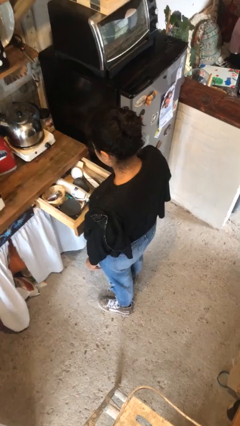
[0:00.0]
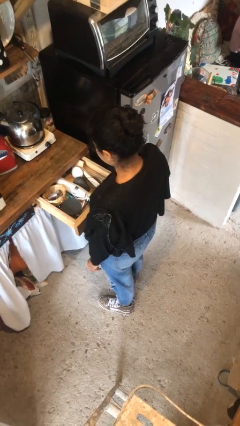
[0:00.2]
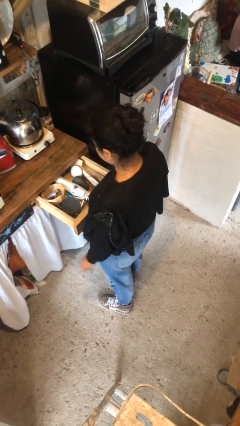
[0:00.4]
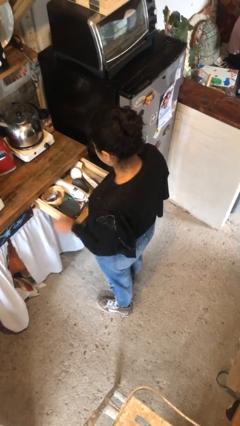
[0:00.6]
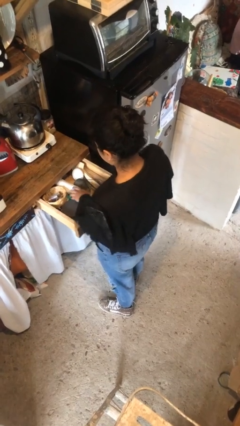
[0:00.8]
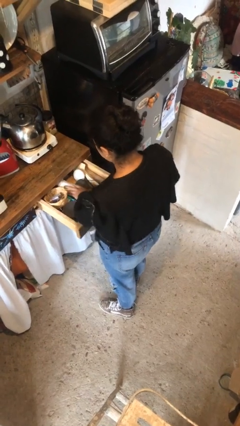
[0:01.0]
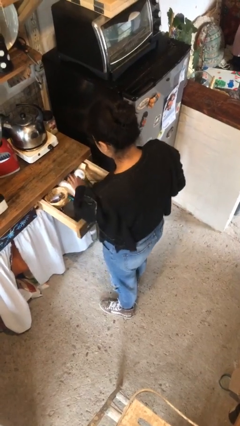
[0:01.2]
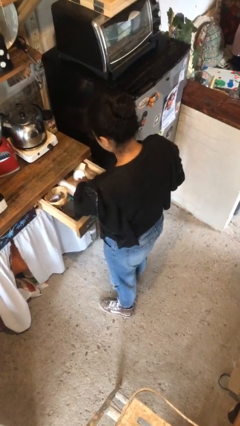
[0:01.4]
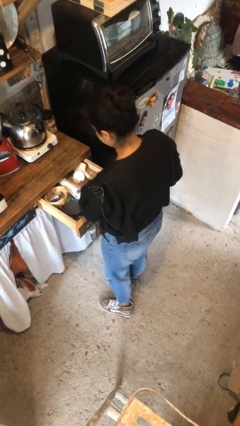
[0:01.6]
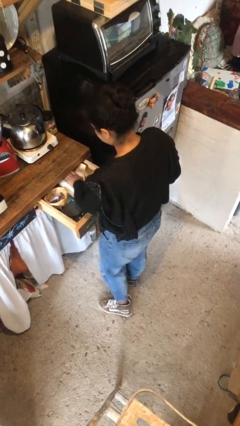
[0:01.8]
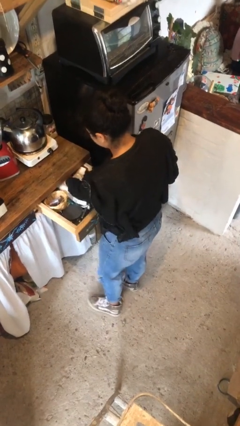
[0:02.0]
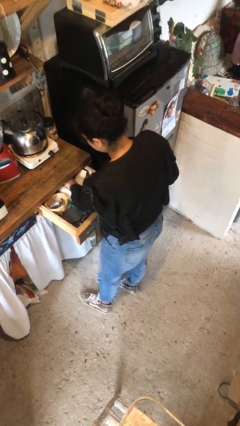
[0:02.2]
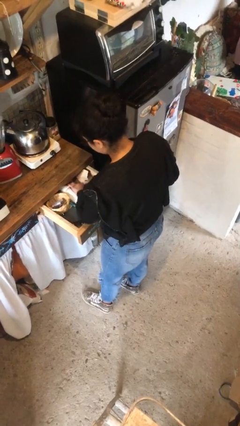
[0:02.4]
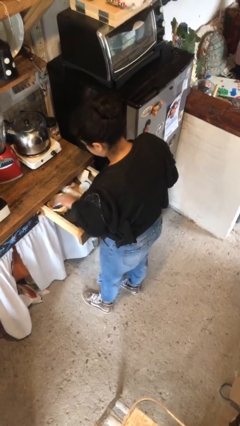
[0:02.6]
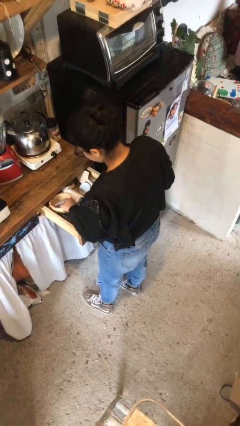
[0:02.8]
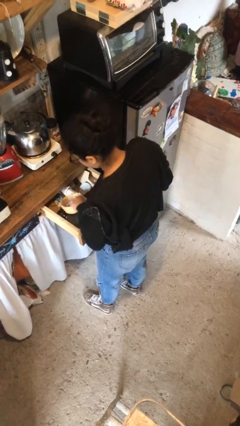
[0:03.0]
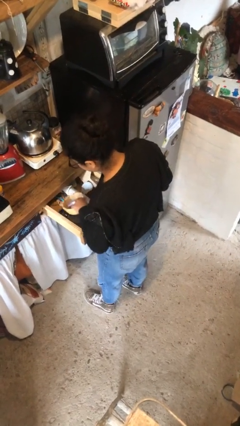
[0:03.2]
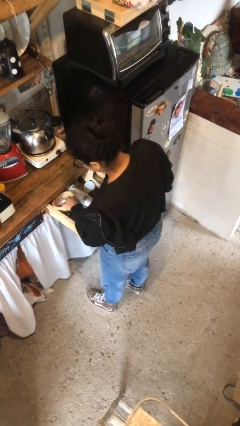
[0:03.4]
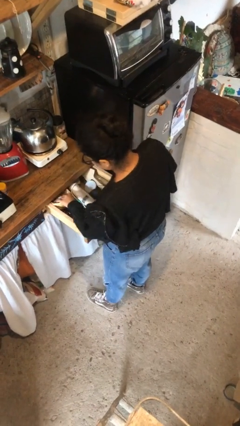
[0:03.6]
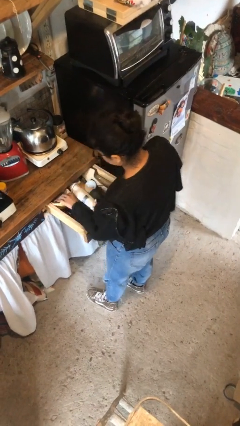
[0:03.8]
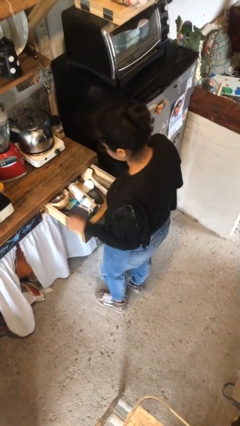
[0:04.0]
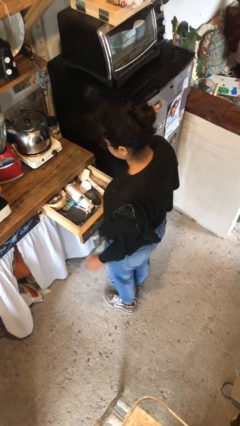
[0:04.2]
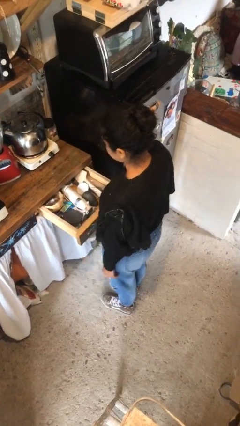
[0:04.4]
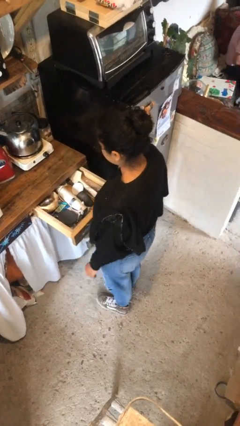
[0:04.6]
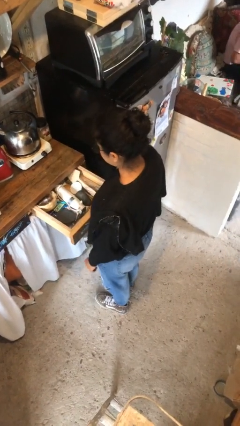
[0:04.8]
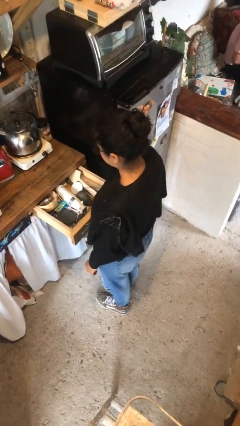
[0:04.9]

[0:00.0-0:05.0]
person searches in kitchen drawer

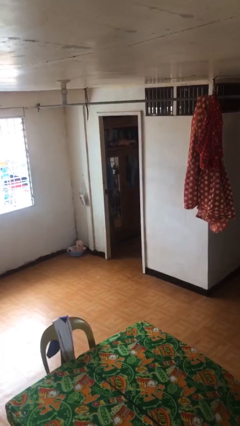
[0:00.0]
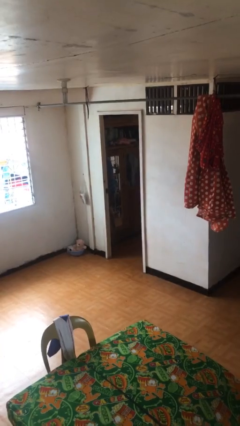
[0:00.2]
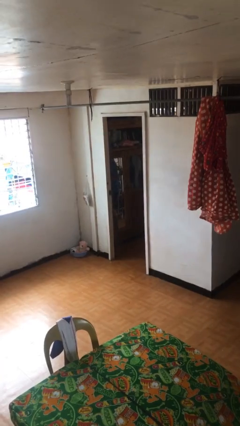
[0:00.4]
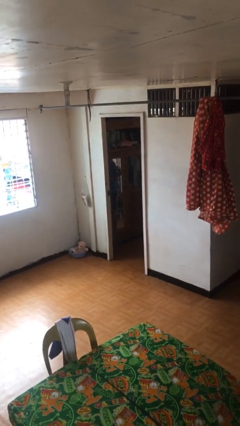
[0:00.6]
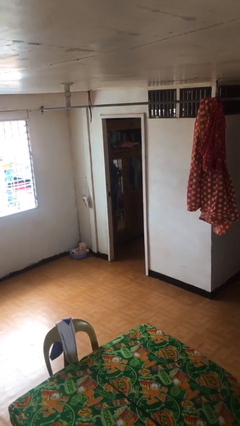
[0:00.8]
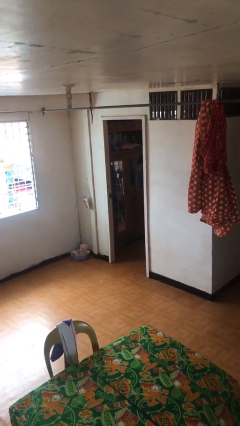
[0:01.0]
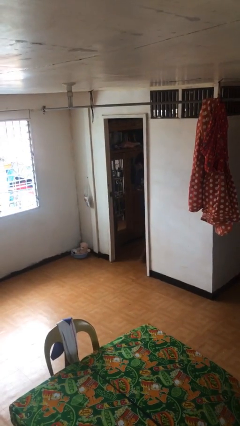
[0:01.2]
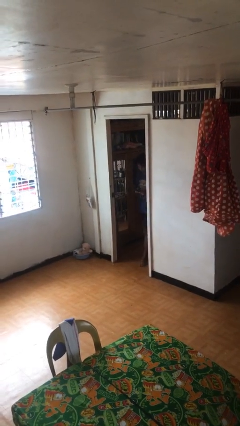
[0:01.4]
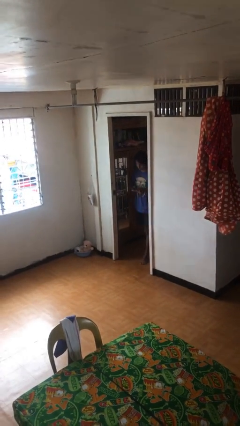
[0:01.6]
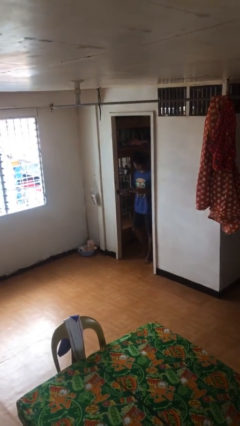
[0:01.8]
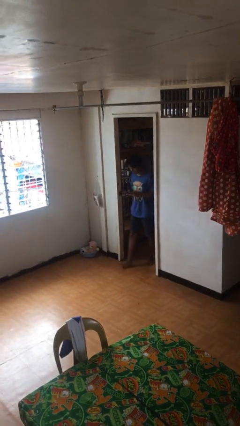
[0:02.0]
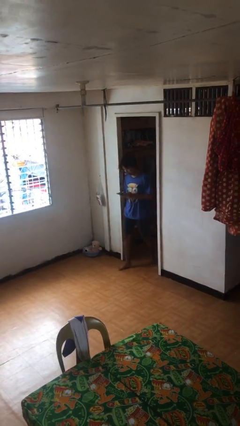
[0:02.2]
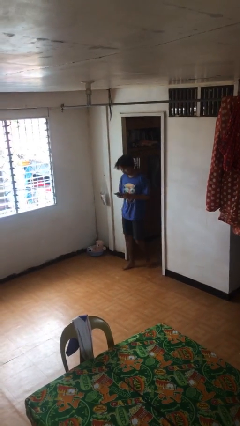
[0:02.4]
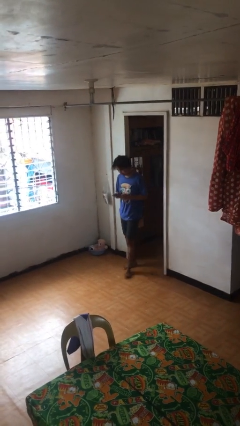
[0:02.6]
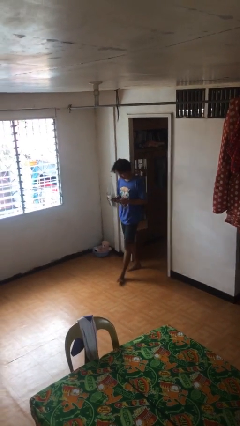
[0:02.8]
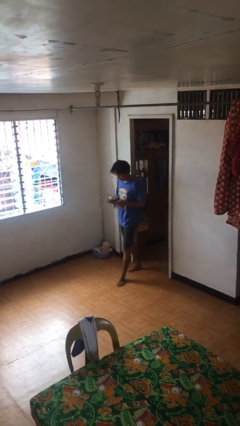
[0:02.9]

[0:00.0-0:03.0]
person exits scene through structure

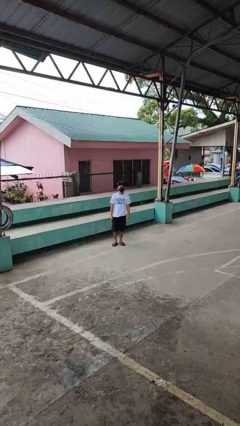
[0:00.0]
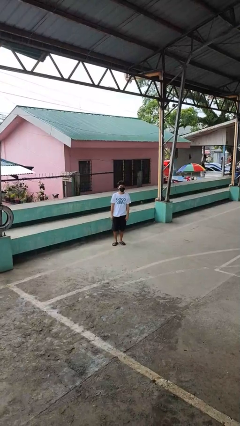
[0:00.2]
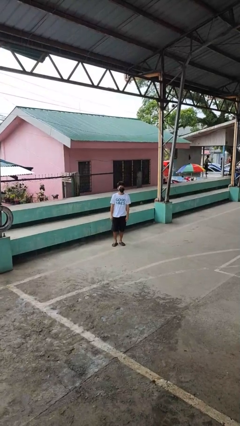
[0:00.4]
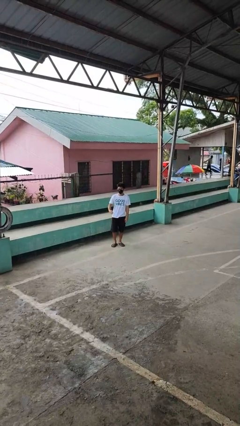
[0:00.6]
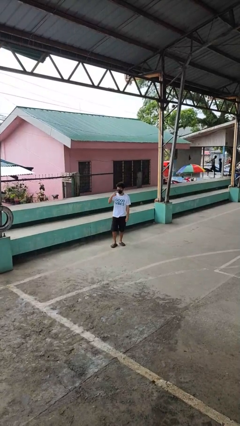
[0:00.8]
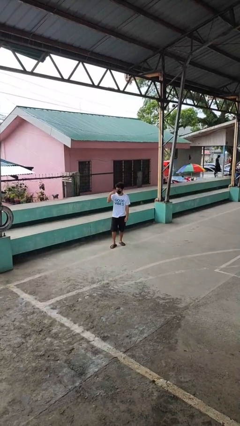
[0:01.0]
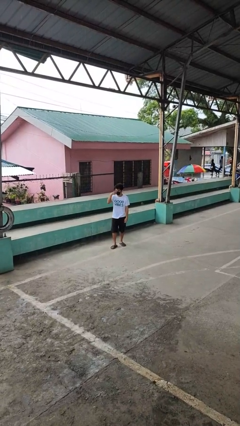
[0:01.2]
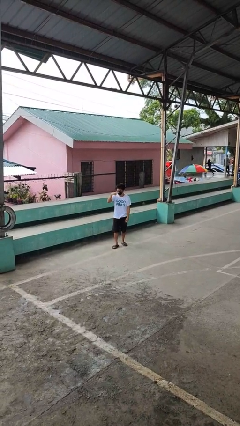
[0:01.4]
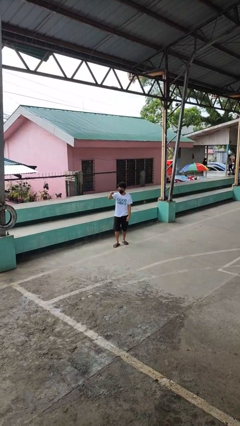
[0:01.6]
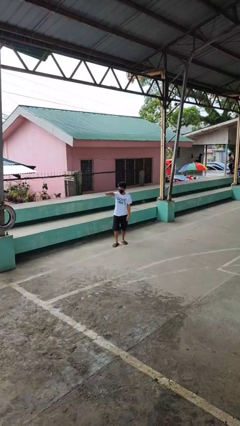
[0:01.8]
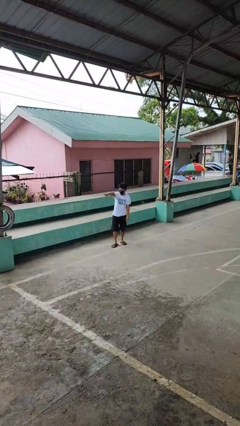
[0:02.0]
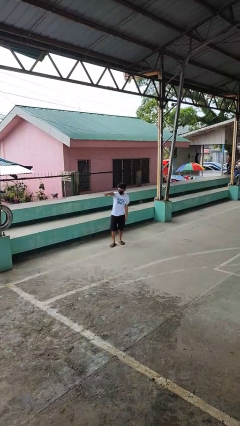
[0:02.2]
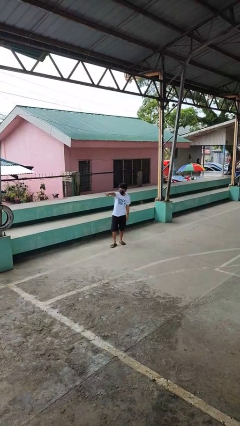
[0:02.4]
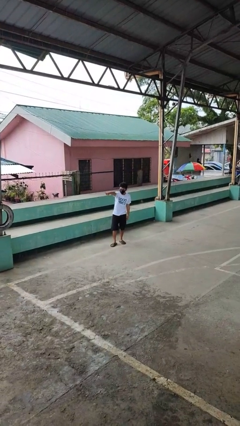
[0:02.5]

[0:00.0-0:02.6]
person gestures watch closely

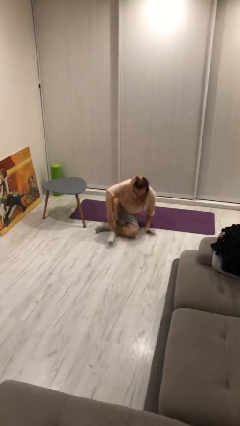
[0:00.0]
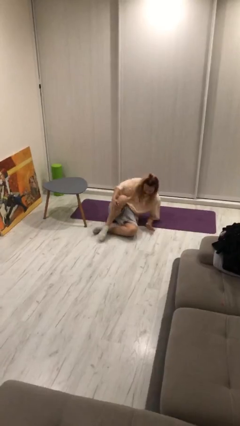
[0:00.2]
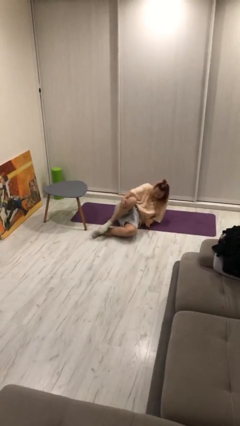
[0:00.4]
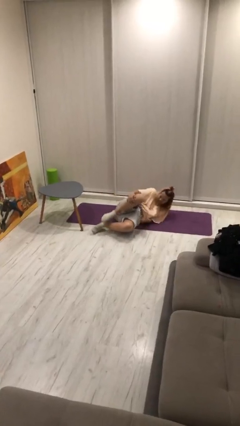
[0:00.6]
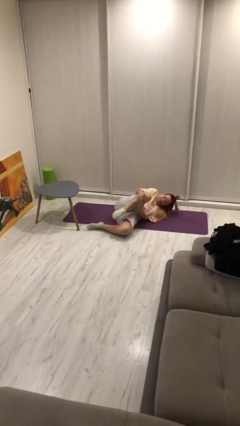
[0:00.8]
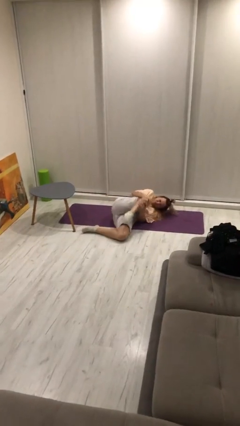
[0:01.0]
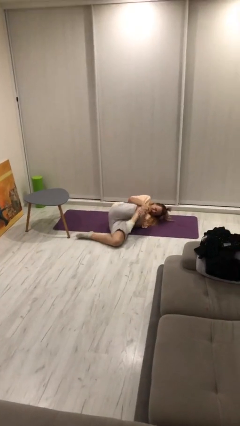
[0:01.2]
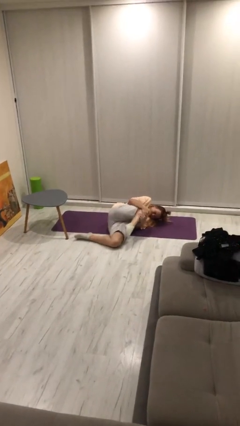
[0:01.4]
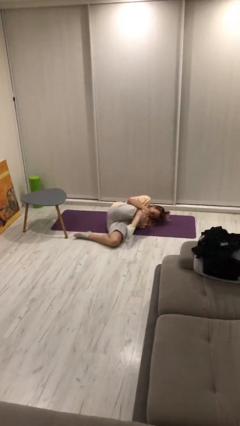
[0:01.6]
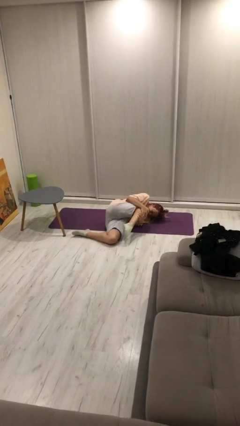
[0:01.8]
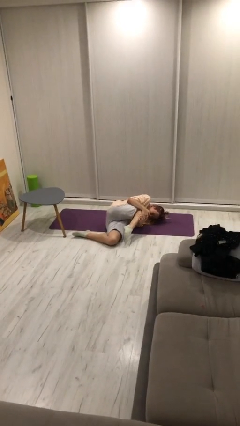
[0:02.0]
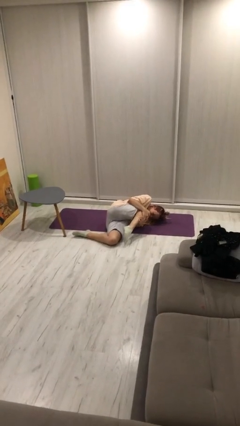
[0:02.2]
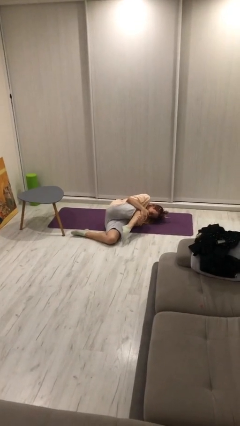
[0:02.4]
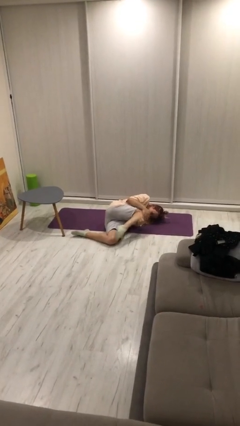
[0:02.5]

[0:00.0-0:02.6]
person lies down on floor

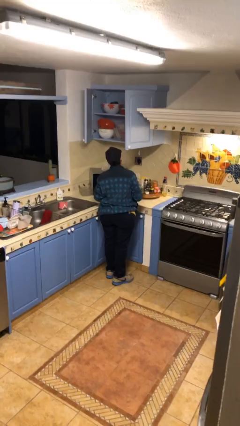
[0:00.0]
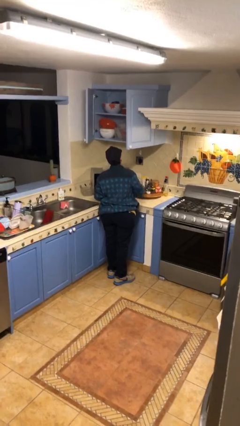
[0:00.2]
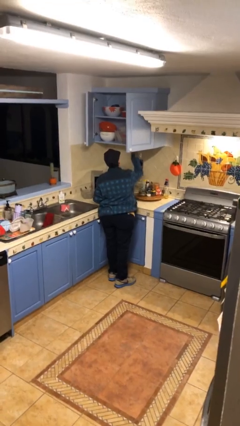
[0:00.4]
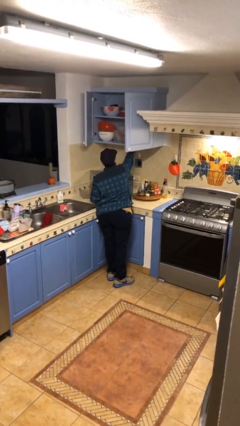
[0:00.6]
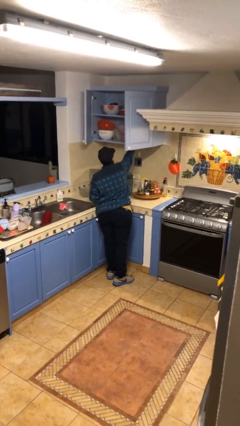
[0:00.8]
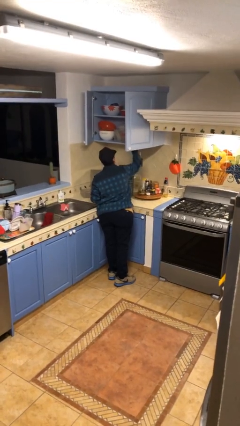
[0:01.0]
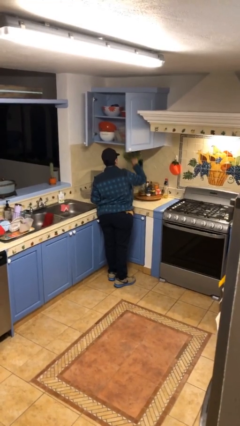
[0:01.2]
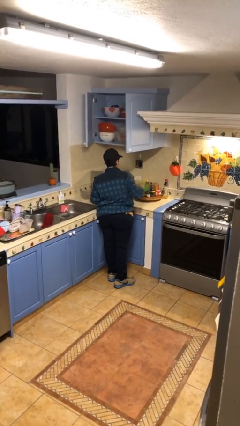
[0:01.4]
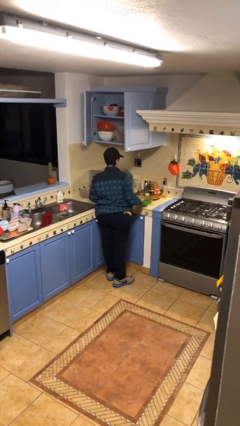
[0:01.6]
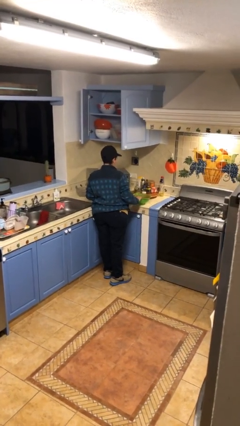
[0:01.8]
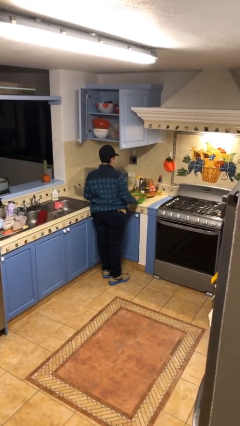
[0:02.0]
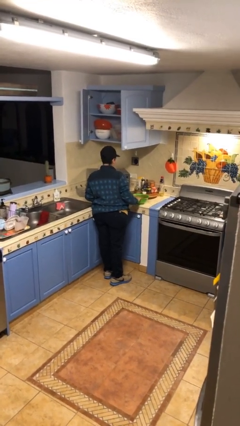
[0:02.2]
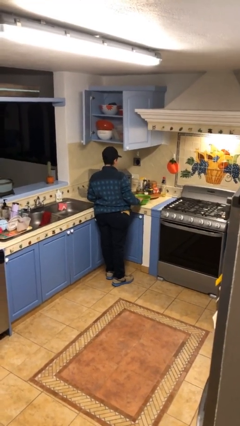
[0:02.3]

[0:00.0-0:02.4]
person takes object from cabinet

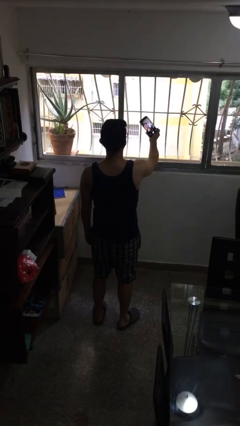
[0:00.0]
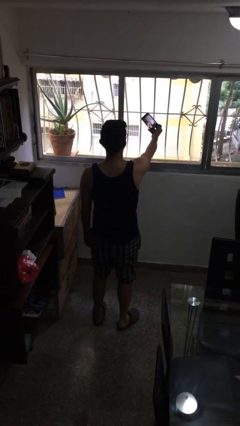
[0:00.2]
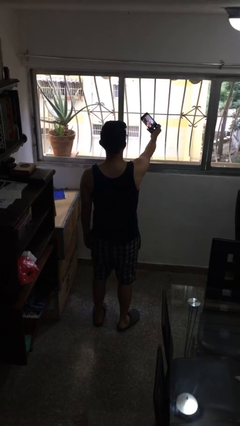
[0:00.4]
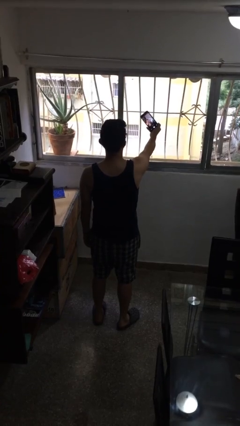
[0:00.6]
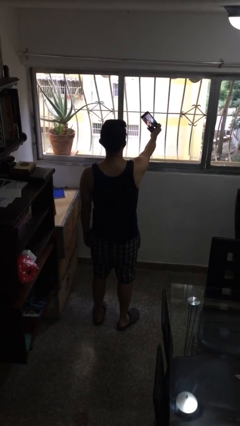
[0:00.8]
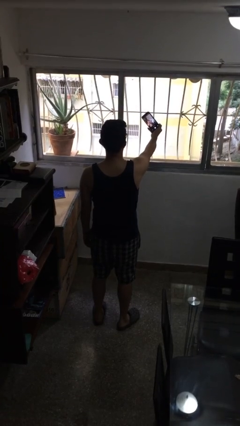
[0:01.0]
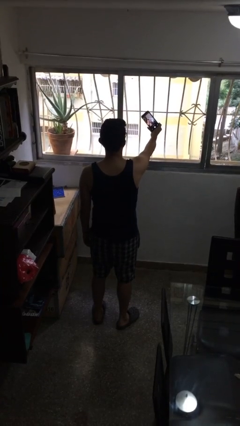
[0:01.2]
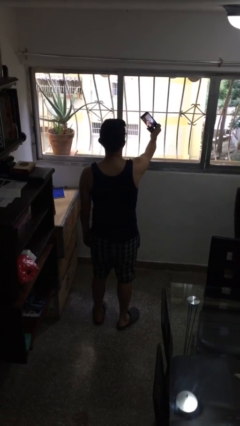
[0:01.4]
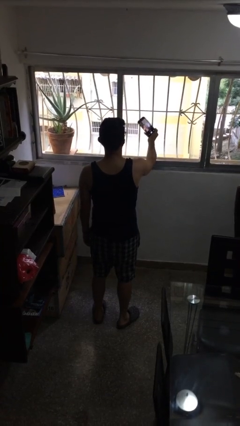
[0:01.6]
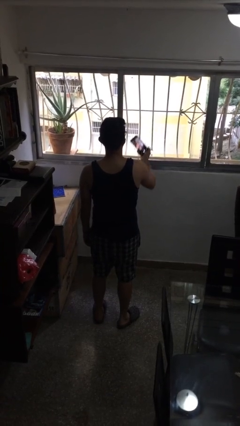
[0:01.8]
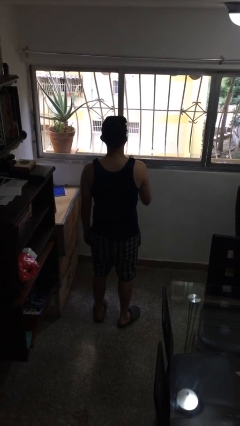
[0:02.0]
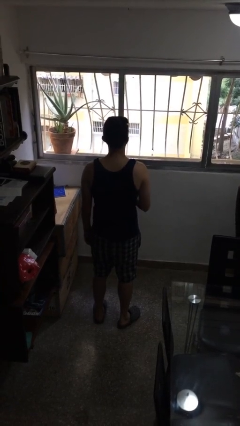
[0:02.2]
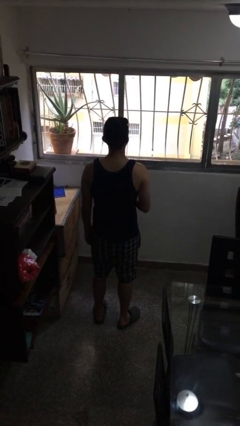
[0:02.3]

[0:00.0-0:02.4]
person takes selfie
